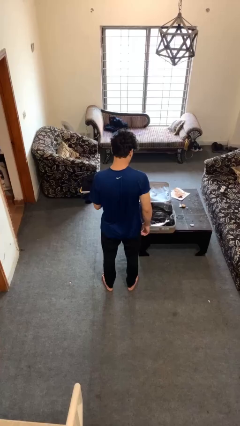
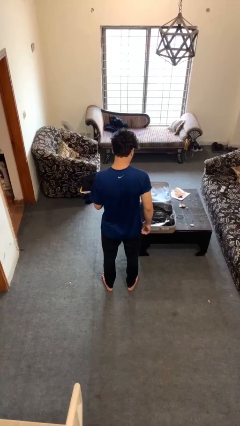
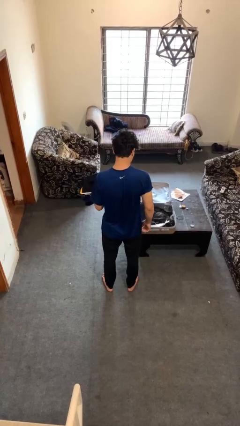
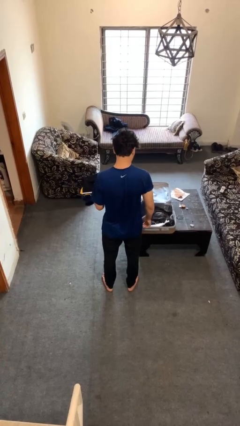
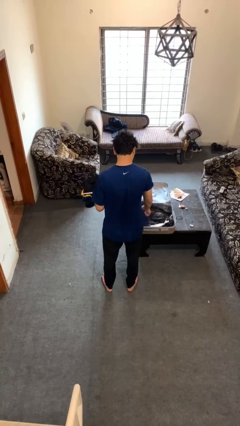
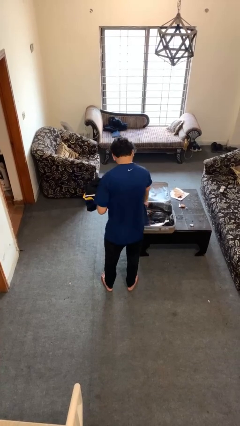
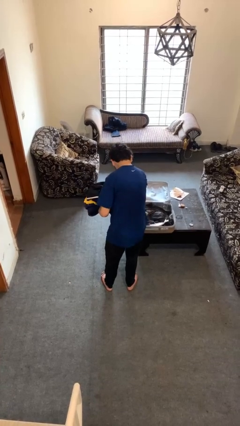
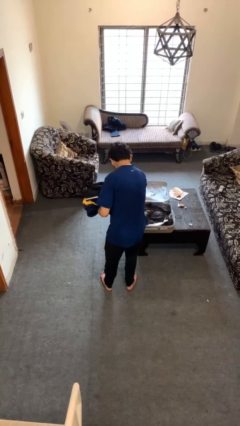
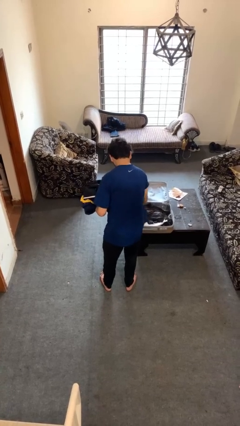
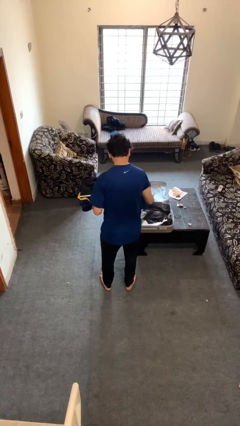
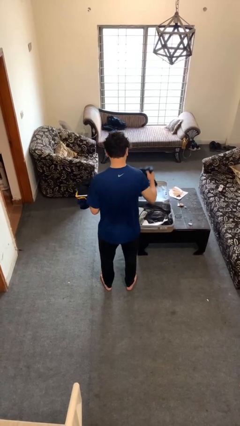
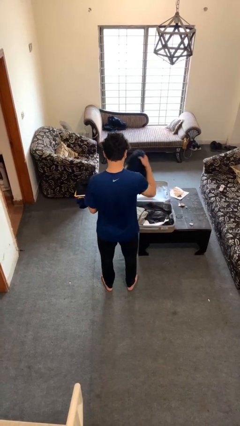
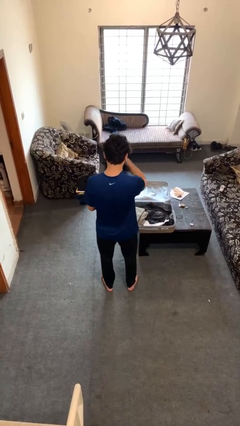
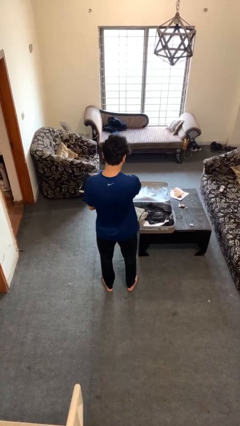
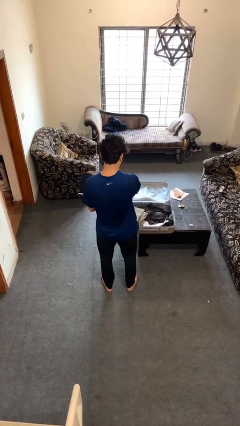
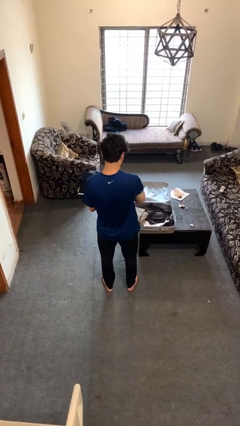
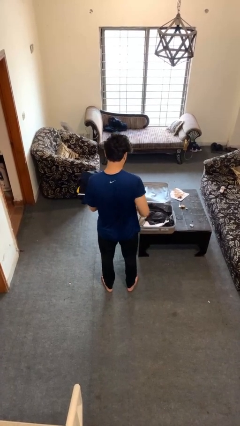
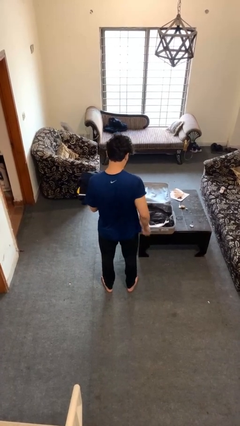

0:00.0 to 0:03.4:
person unloads clothes from suitcase

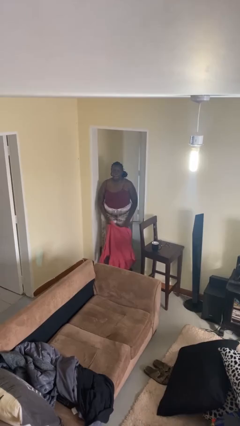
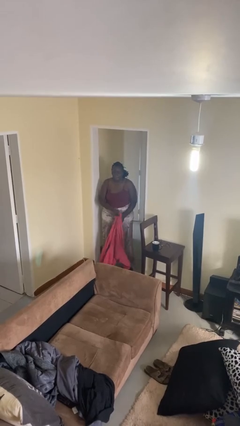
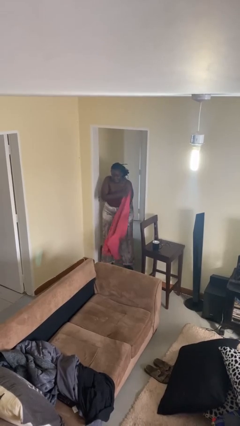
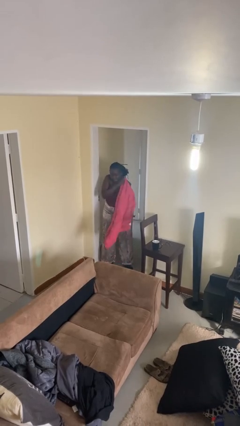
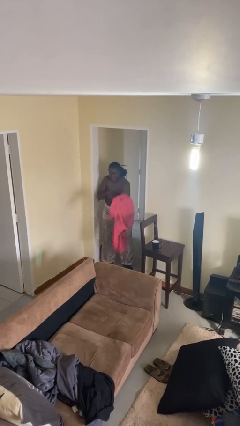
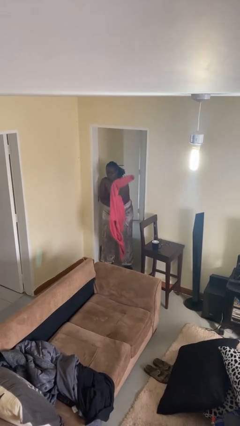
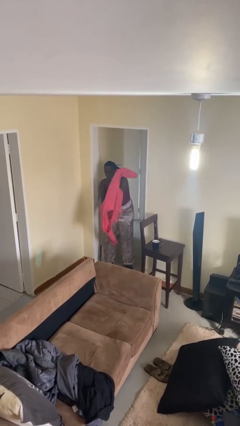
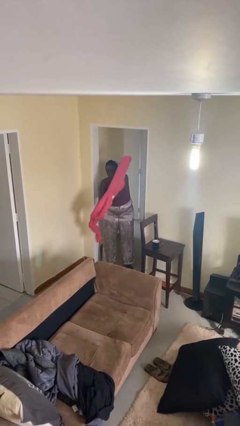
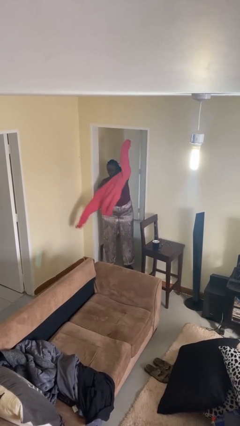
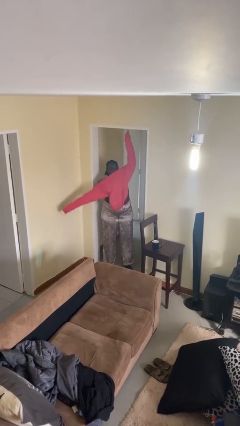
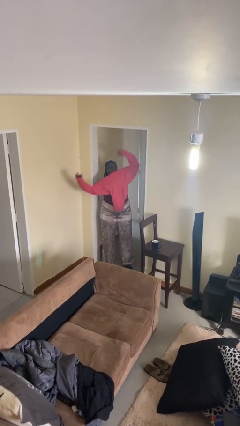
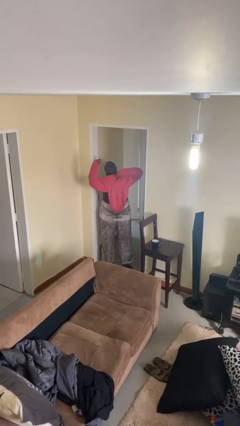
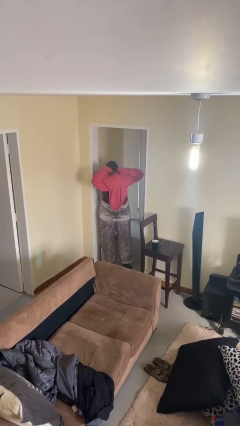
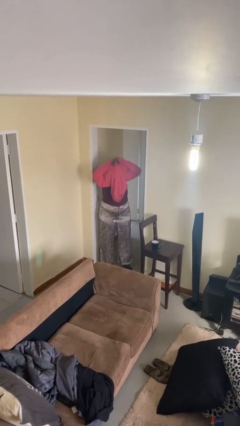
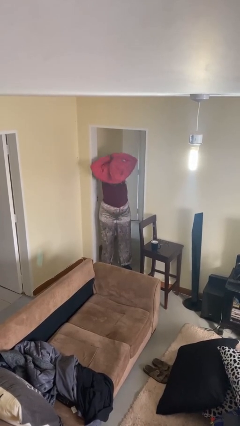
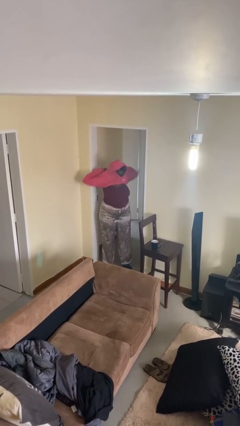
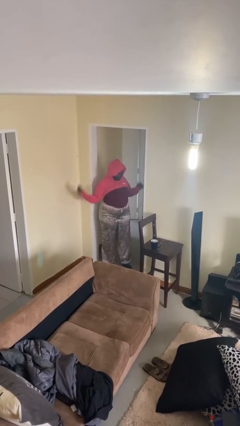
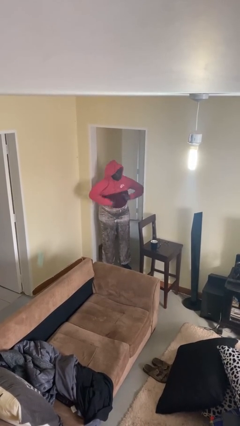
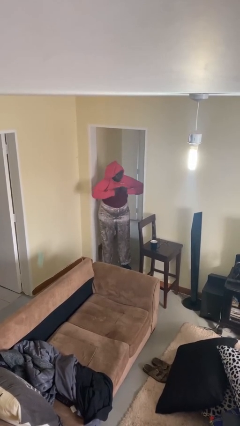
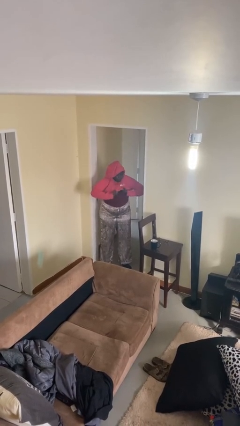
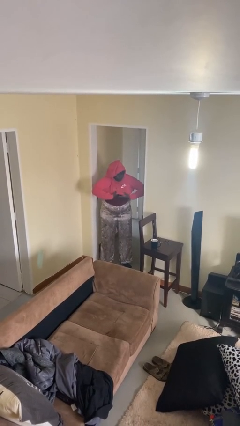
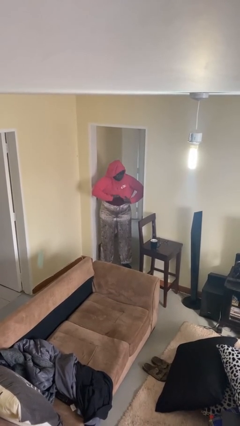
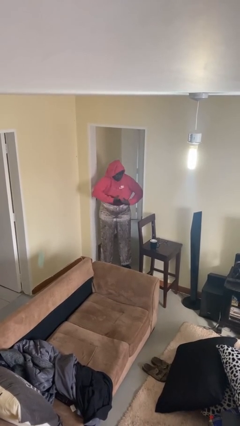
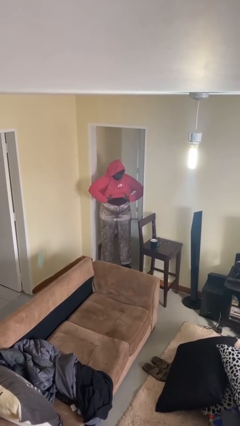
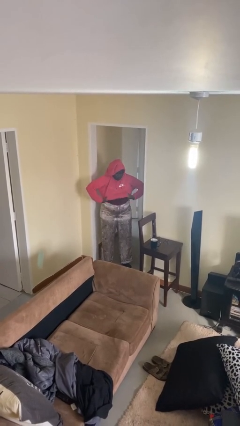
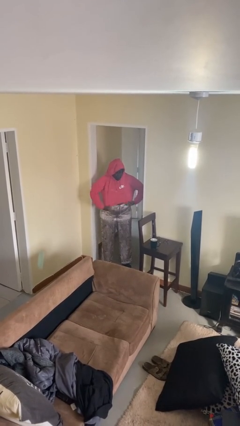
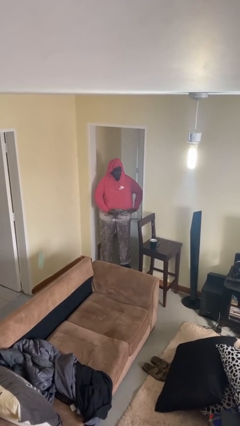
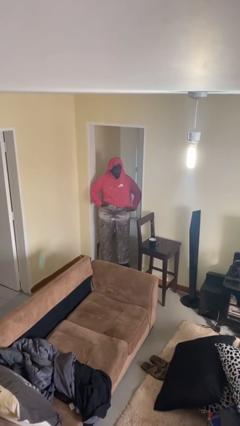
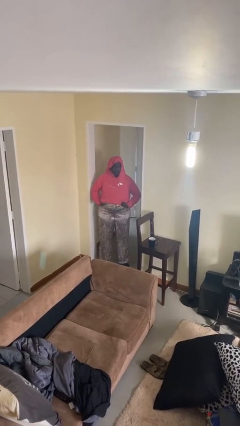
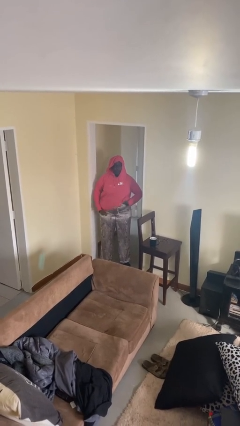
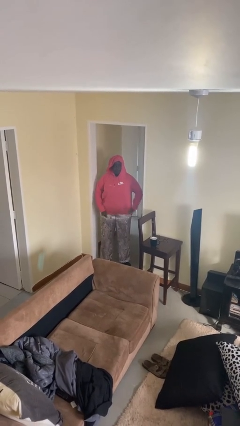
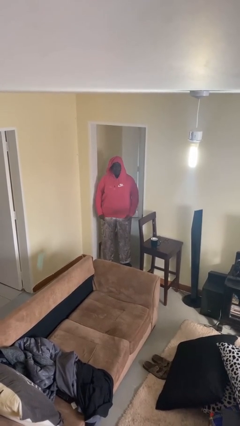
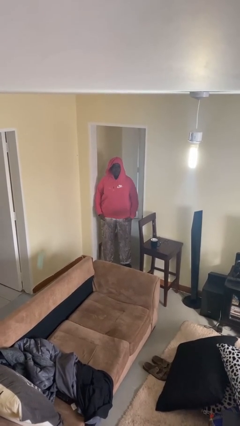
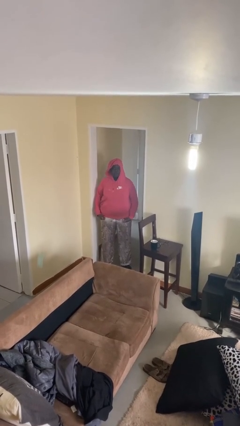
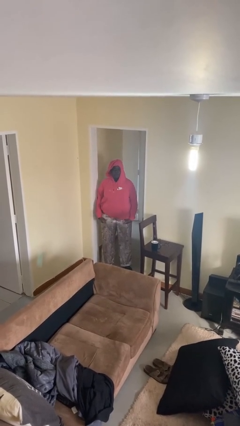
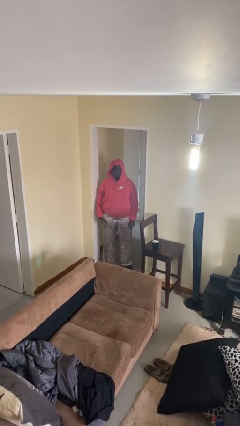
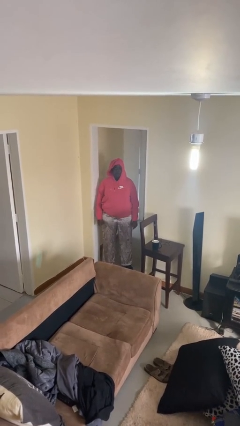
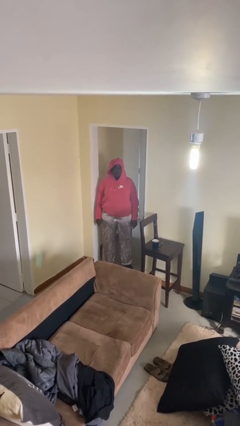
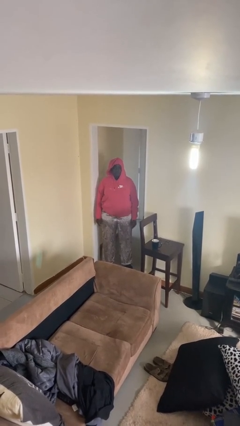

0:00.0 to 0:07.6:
person puts on hoodie

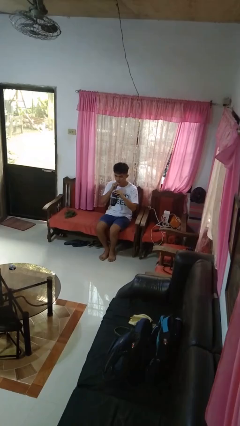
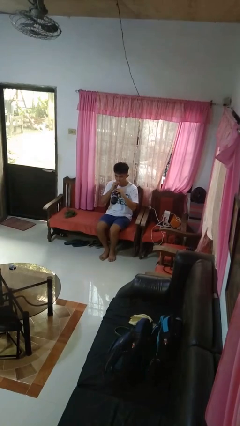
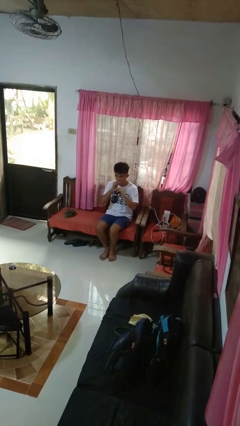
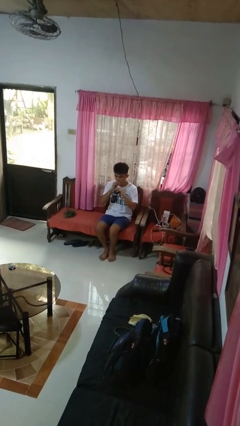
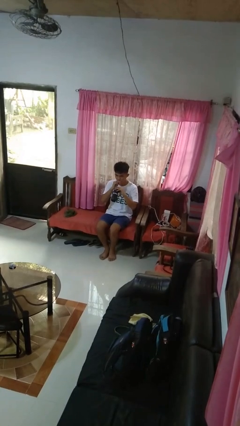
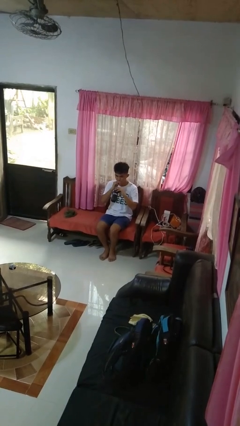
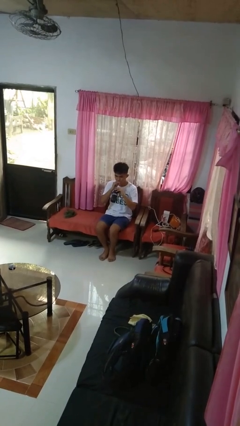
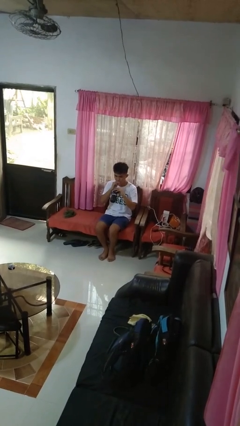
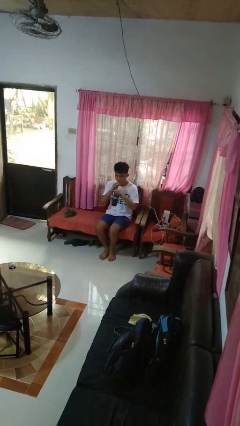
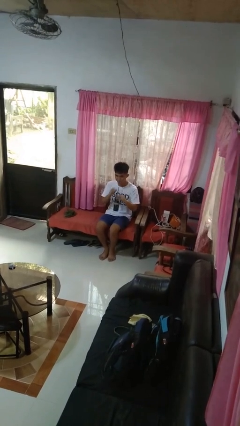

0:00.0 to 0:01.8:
person drinks from straw

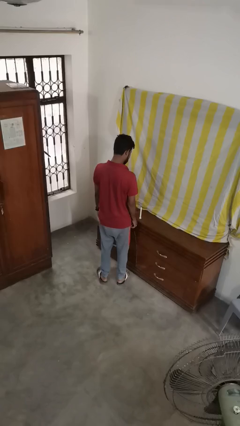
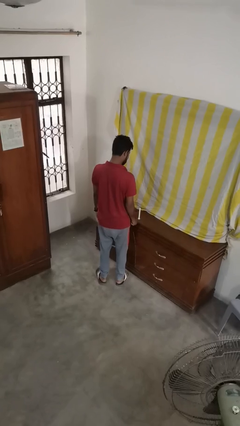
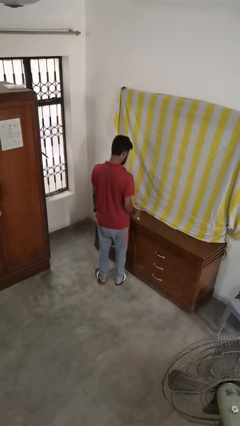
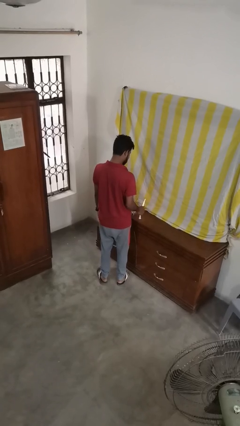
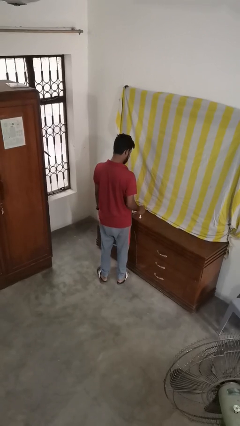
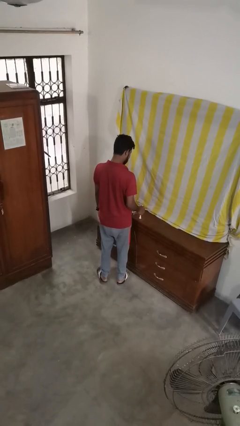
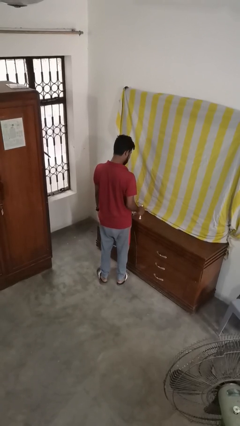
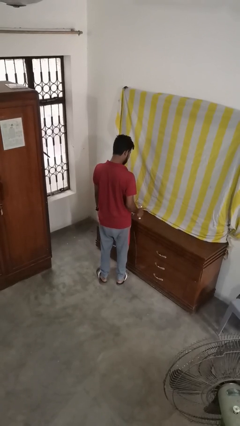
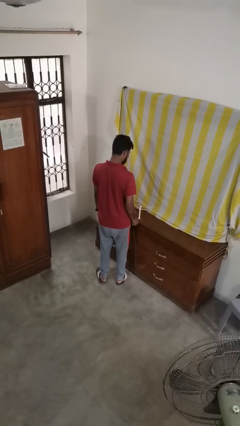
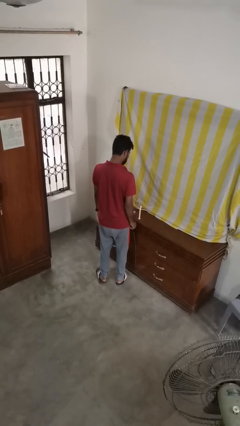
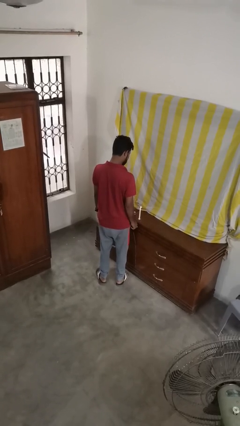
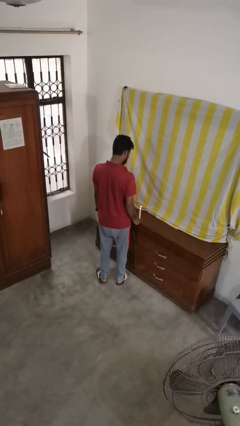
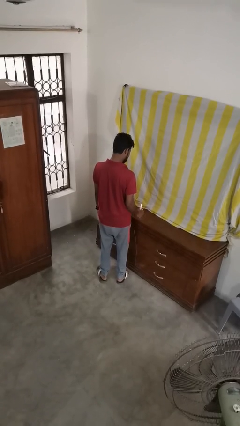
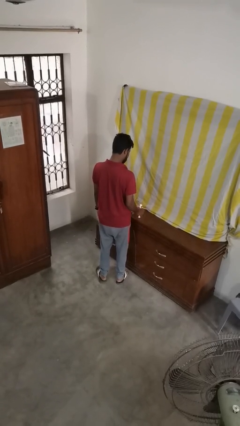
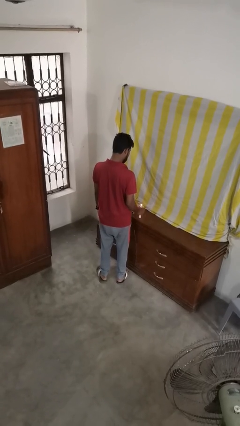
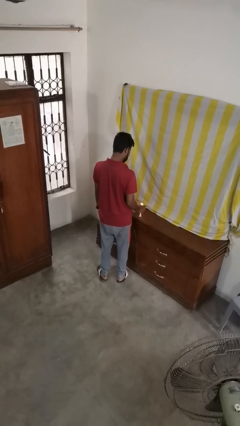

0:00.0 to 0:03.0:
person lights candle

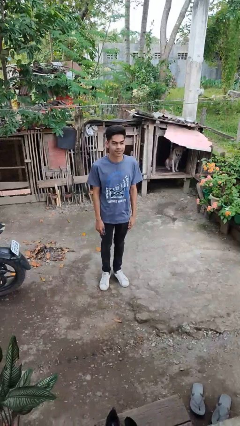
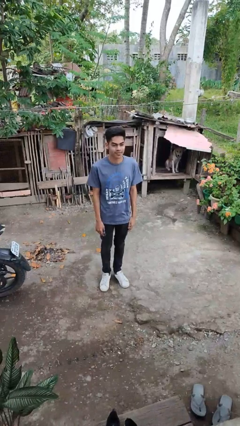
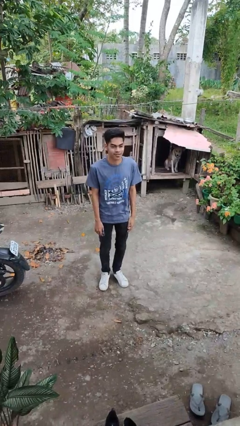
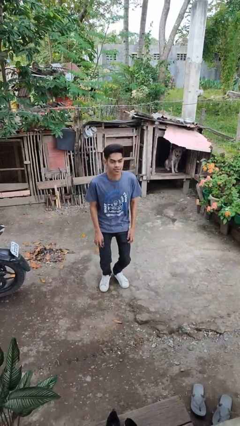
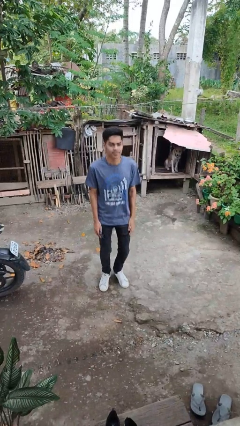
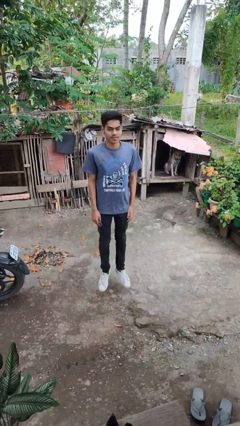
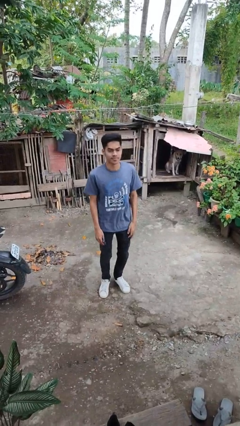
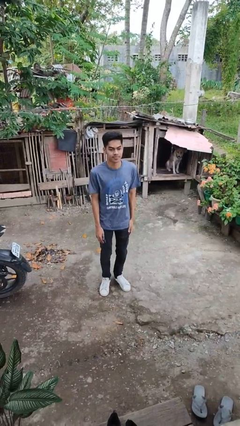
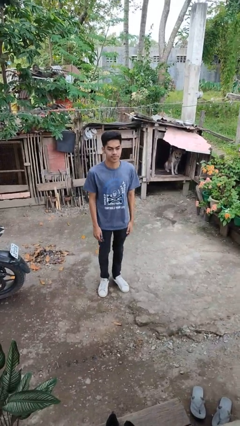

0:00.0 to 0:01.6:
person jumps

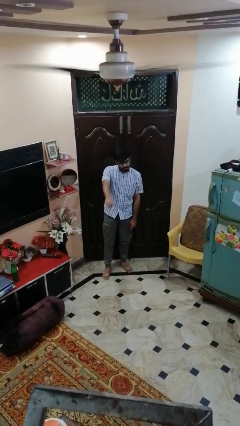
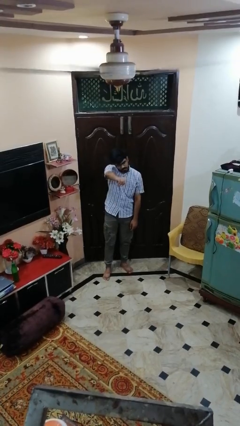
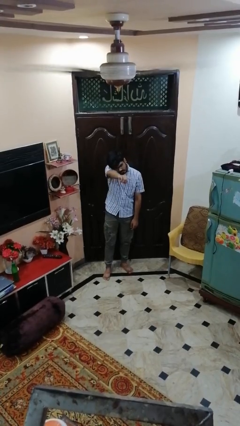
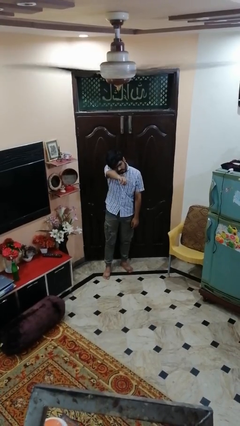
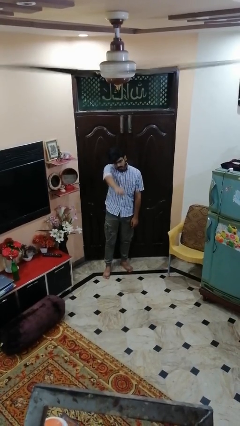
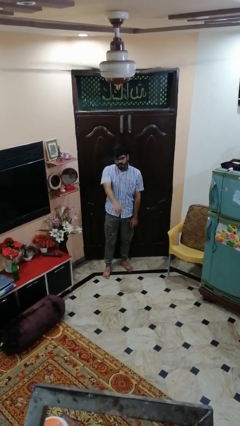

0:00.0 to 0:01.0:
person points at person
